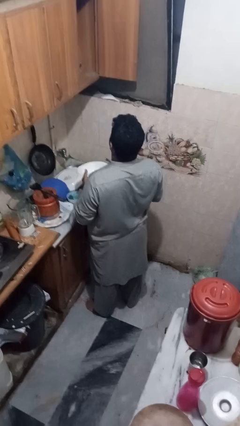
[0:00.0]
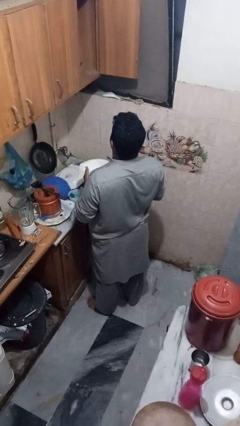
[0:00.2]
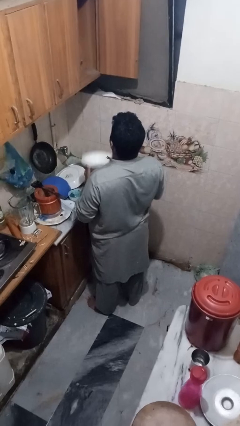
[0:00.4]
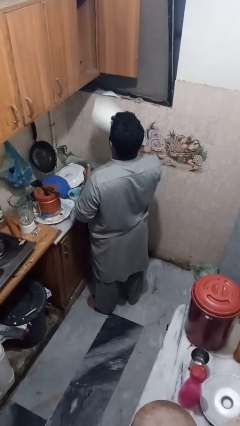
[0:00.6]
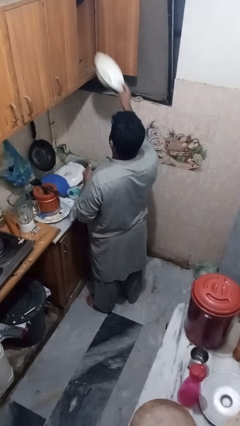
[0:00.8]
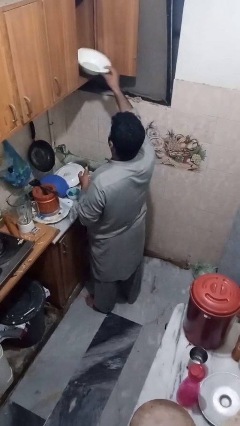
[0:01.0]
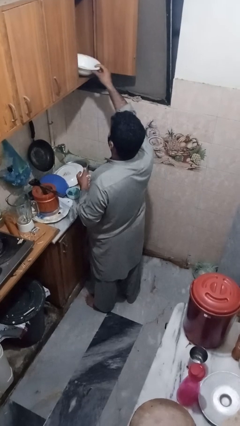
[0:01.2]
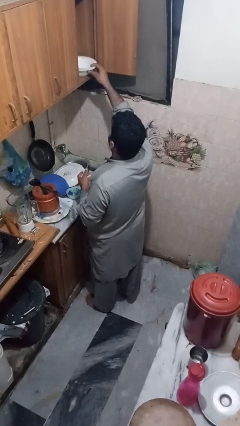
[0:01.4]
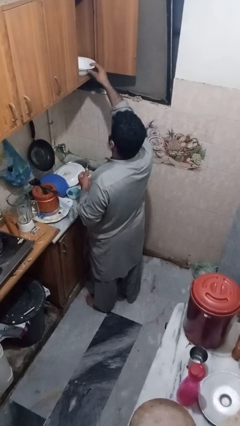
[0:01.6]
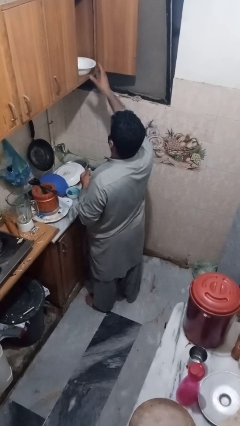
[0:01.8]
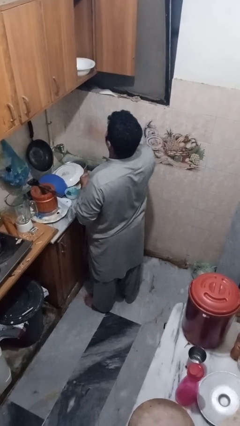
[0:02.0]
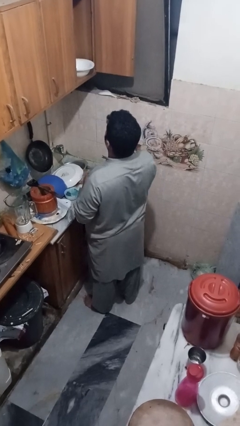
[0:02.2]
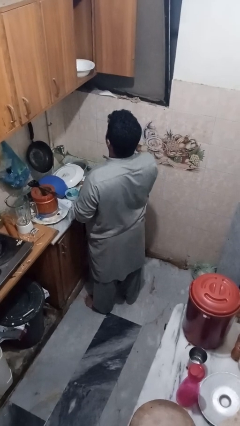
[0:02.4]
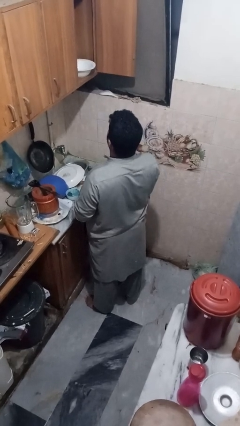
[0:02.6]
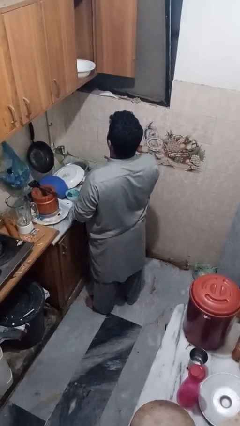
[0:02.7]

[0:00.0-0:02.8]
person puts object in cabinet

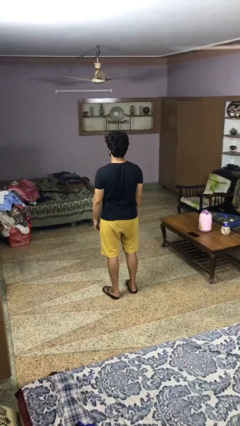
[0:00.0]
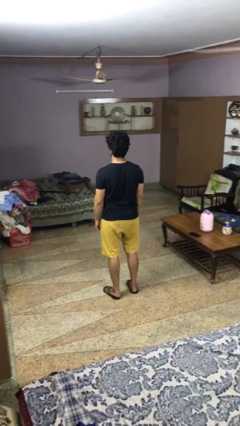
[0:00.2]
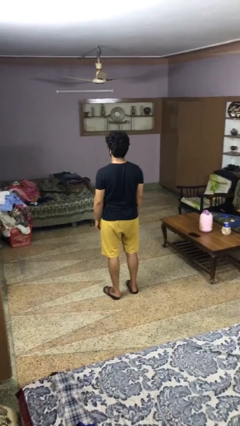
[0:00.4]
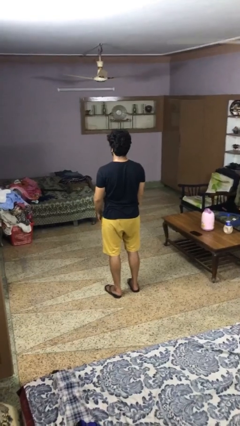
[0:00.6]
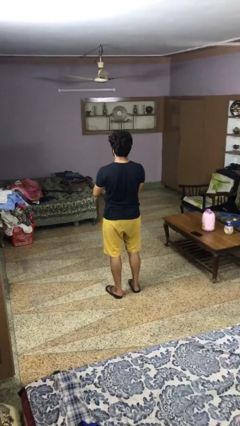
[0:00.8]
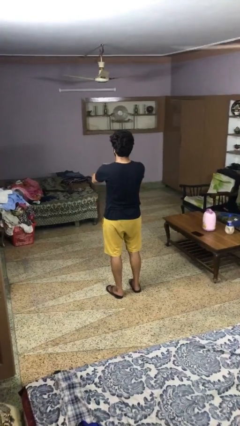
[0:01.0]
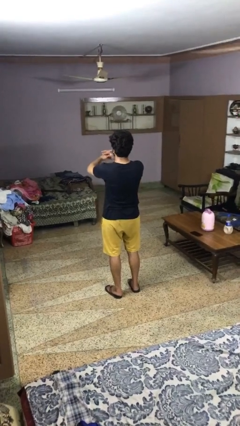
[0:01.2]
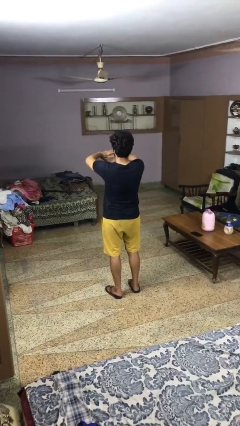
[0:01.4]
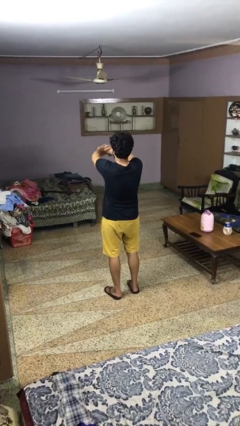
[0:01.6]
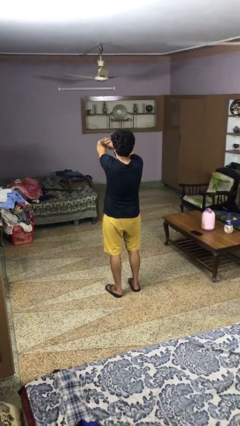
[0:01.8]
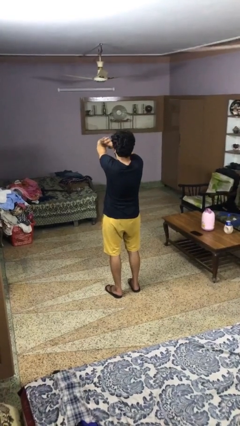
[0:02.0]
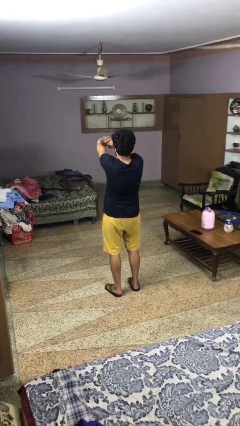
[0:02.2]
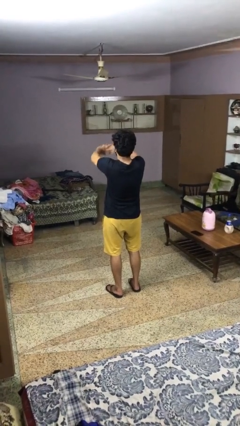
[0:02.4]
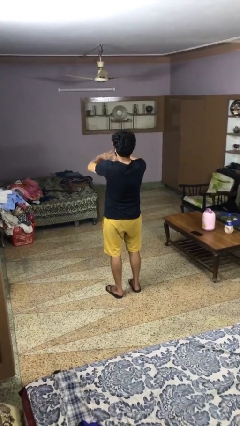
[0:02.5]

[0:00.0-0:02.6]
person cracks knuckles

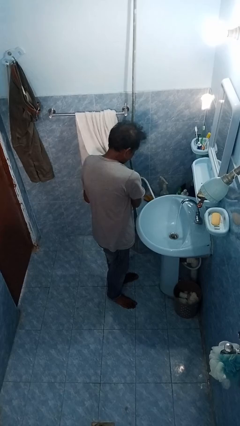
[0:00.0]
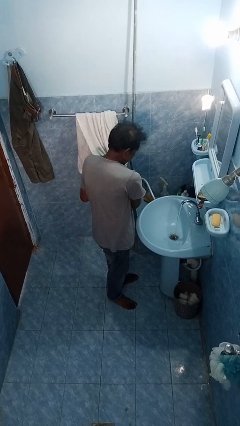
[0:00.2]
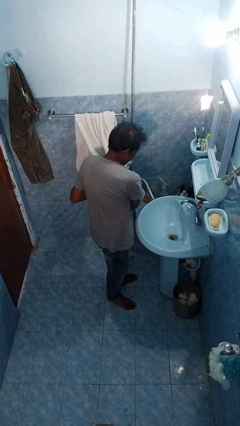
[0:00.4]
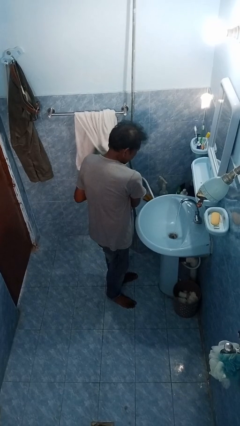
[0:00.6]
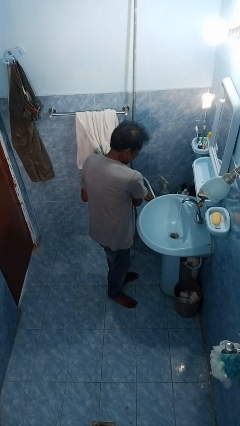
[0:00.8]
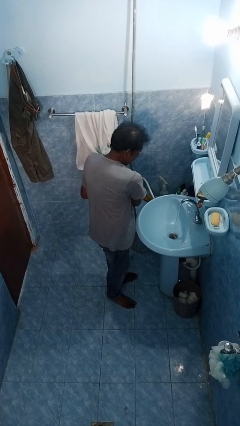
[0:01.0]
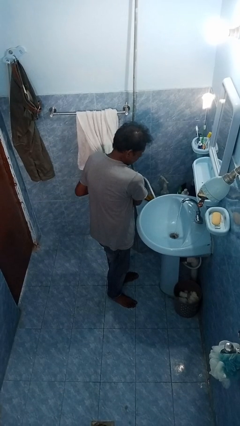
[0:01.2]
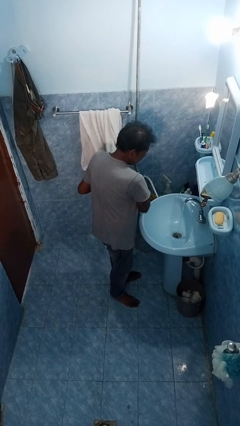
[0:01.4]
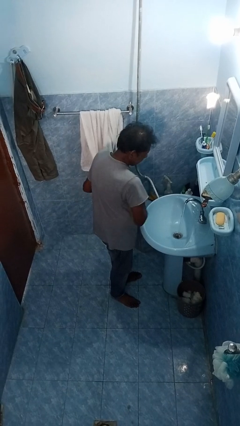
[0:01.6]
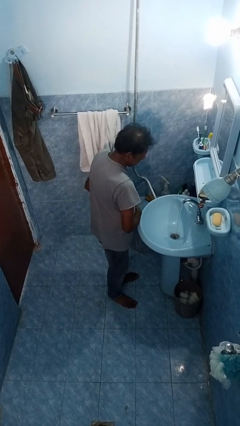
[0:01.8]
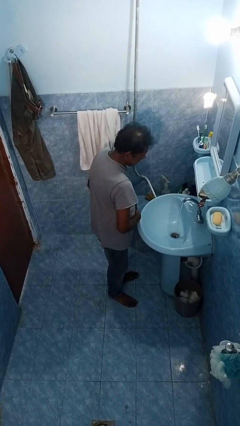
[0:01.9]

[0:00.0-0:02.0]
person dries hands with towel

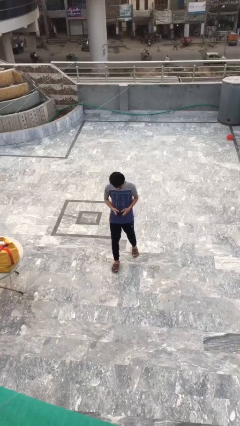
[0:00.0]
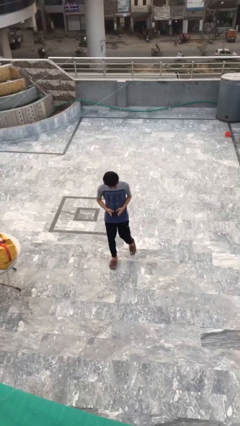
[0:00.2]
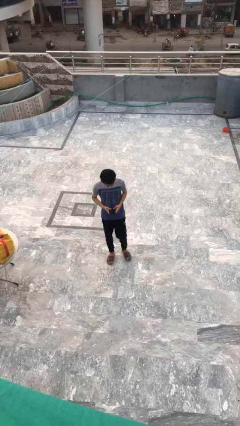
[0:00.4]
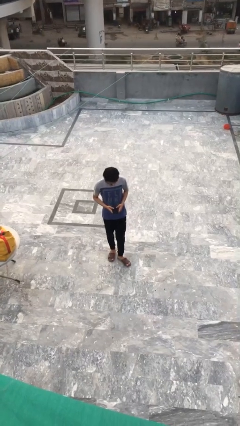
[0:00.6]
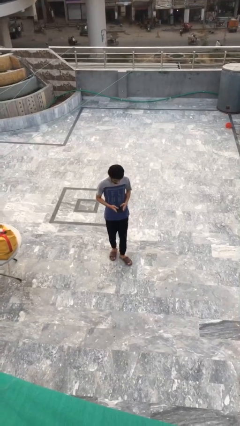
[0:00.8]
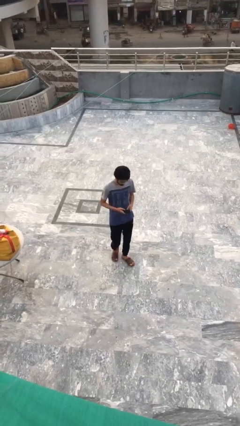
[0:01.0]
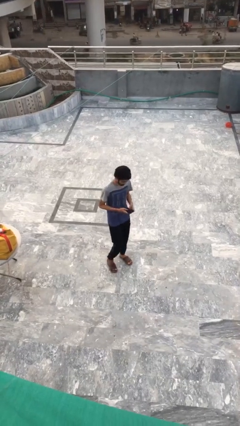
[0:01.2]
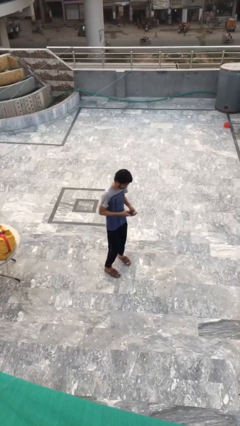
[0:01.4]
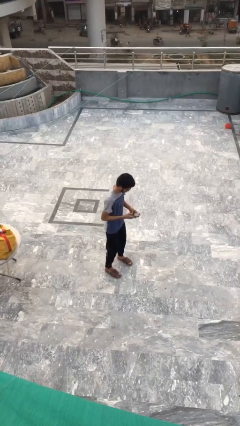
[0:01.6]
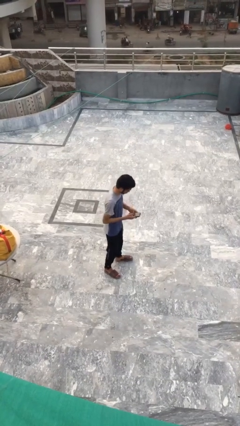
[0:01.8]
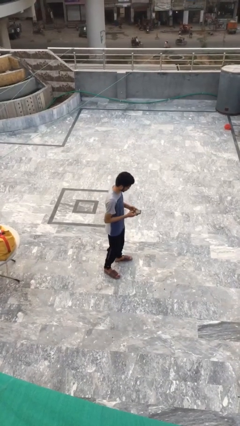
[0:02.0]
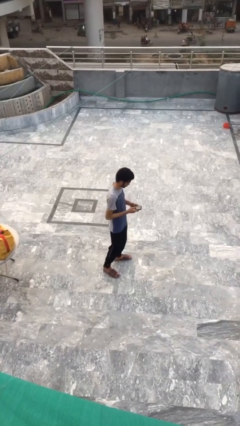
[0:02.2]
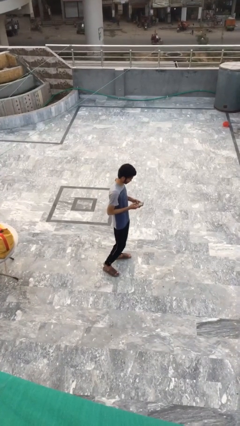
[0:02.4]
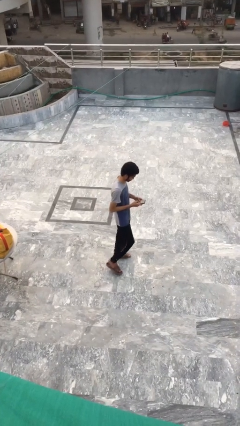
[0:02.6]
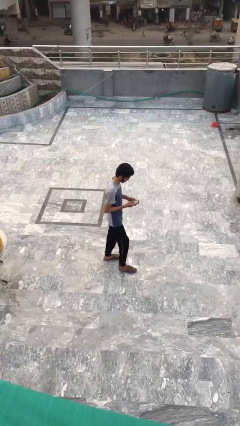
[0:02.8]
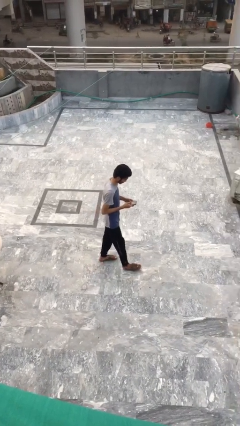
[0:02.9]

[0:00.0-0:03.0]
person texts on phone

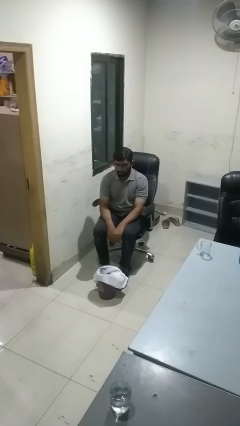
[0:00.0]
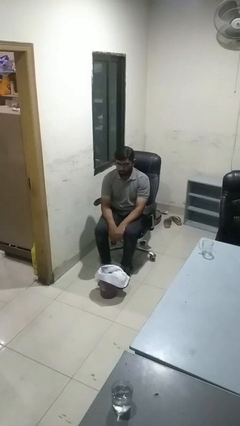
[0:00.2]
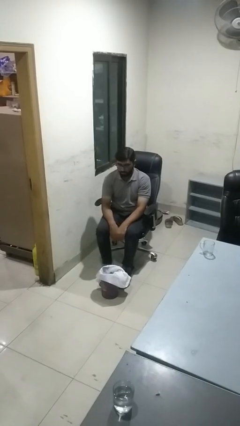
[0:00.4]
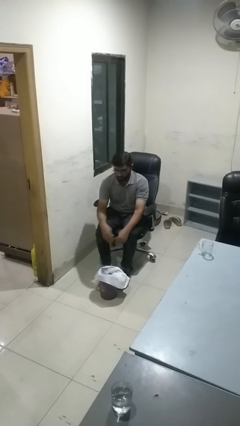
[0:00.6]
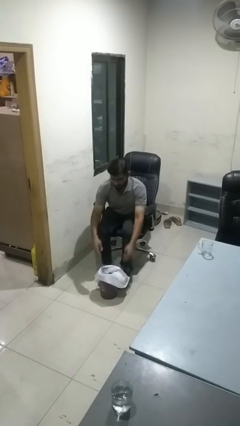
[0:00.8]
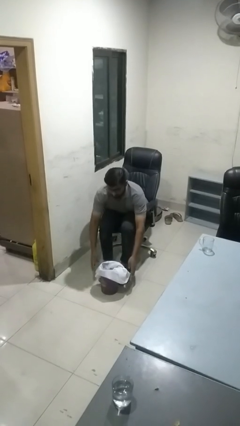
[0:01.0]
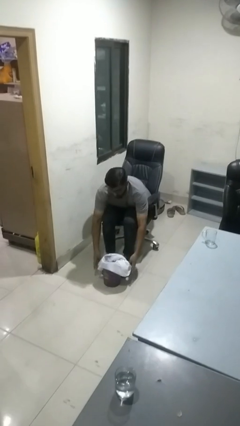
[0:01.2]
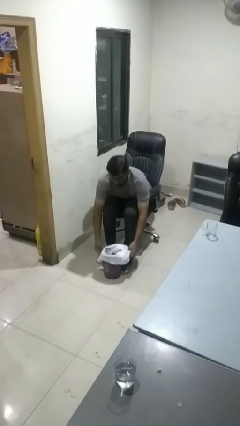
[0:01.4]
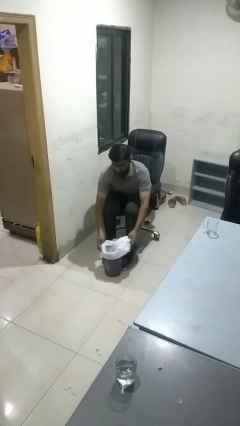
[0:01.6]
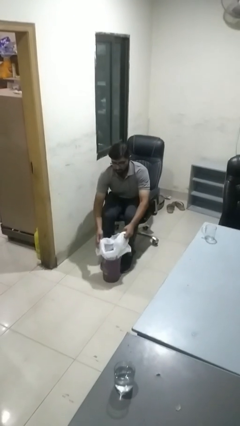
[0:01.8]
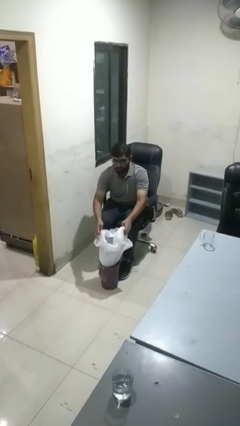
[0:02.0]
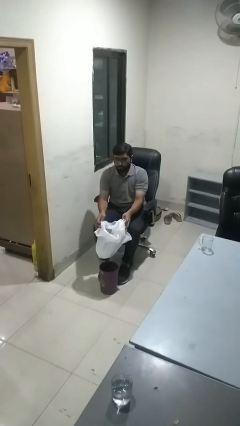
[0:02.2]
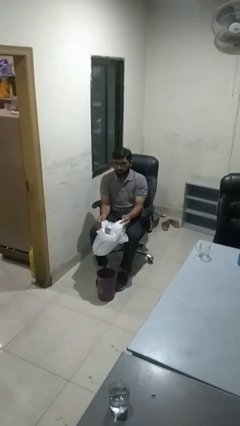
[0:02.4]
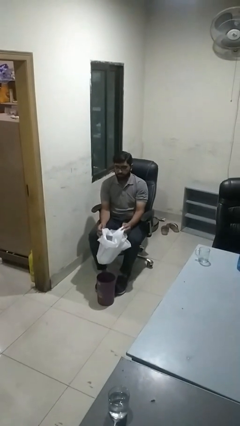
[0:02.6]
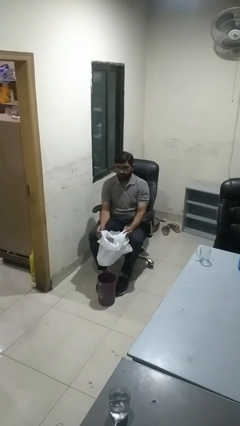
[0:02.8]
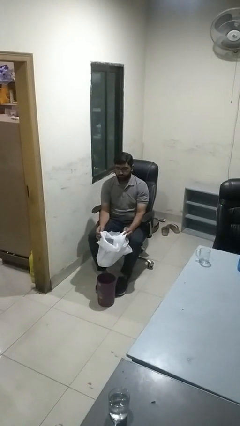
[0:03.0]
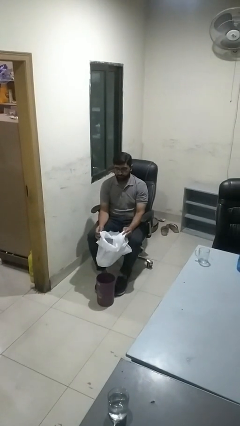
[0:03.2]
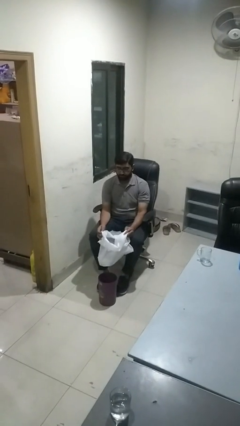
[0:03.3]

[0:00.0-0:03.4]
person removes trashbag from trashcan

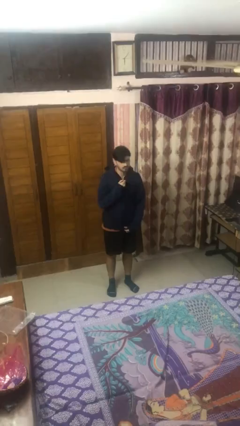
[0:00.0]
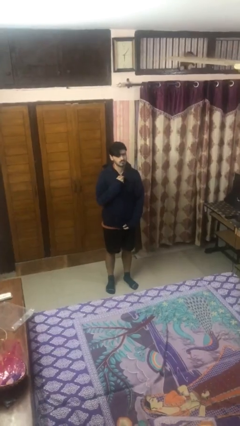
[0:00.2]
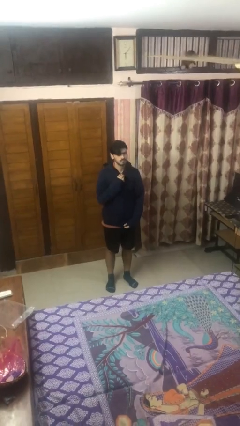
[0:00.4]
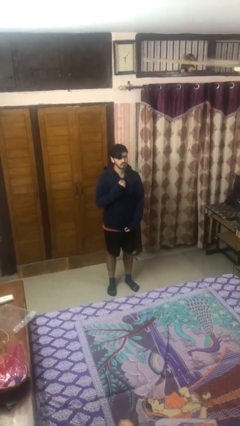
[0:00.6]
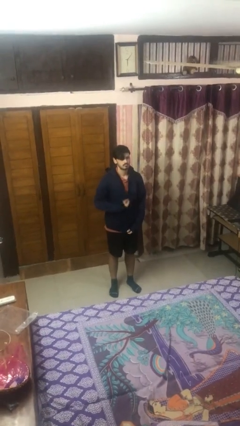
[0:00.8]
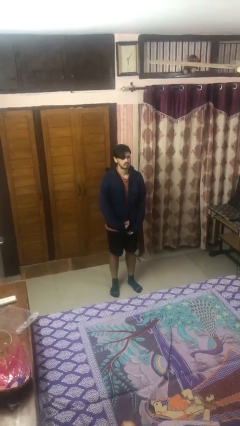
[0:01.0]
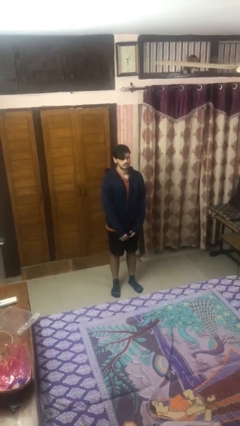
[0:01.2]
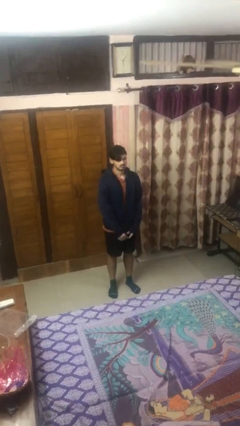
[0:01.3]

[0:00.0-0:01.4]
person unzips jacket

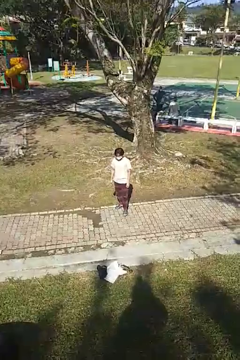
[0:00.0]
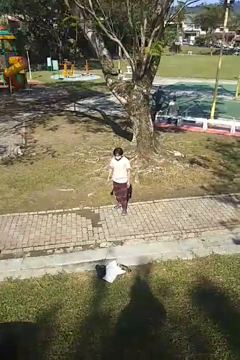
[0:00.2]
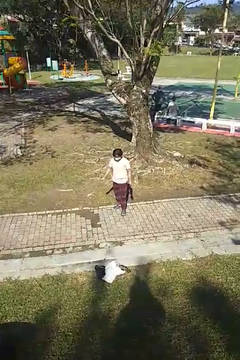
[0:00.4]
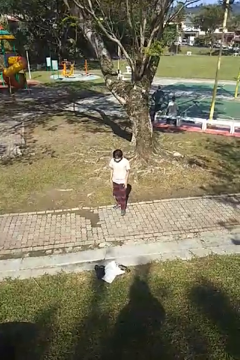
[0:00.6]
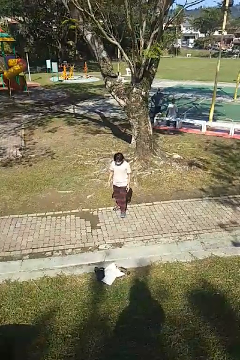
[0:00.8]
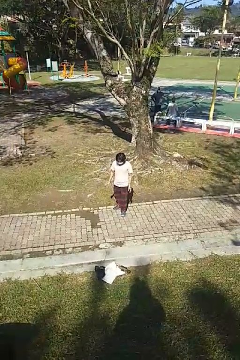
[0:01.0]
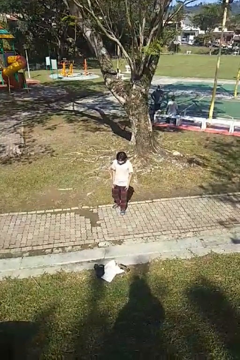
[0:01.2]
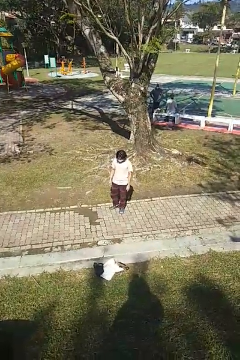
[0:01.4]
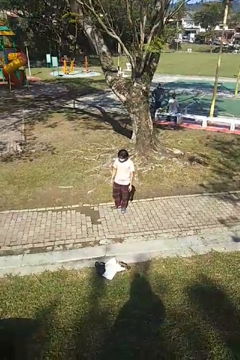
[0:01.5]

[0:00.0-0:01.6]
person slaps hands on thighs

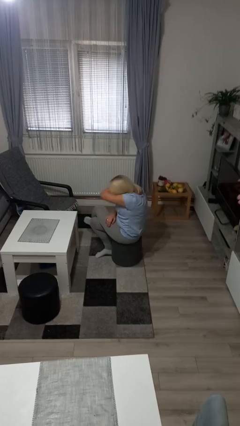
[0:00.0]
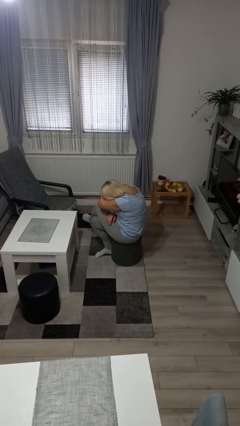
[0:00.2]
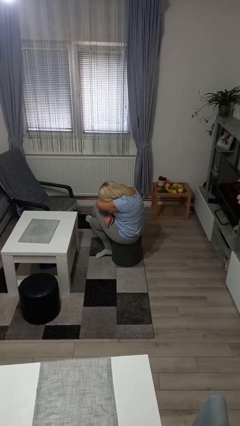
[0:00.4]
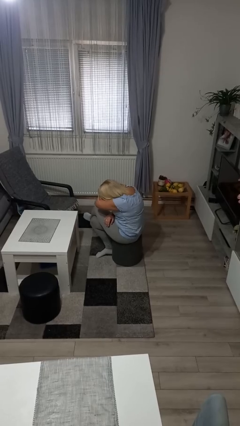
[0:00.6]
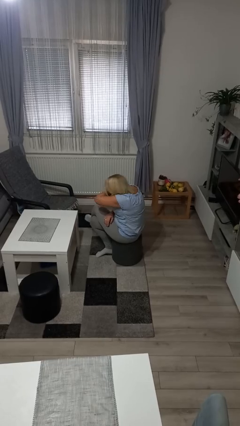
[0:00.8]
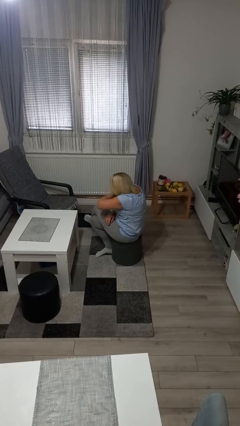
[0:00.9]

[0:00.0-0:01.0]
person sneezes into arm
